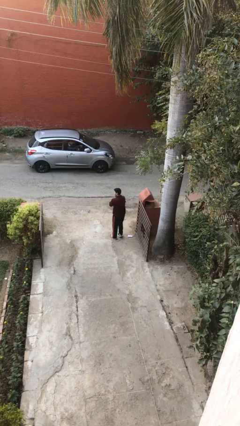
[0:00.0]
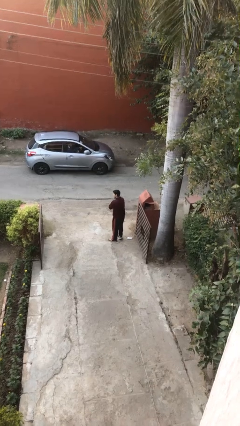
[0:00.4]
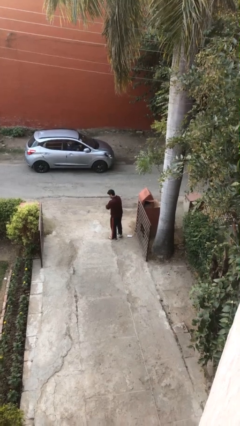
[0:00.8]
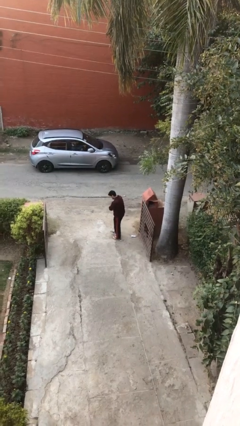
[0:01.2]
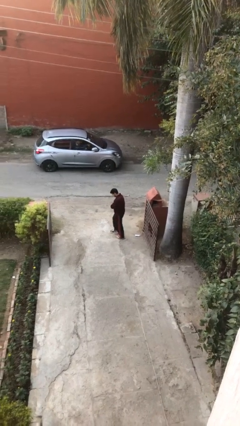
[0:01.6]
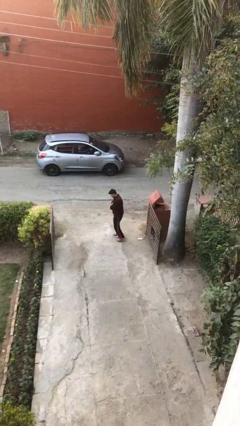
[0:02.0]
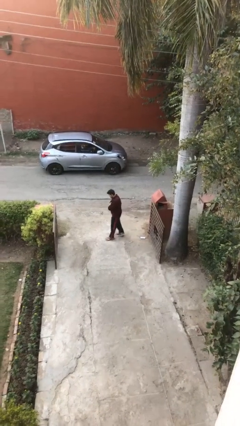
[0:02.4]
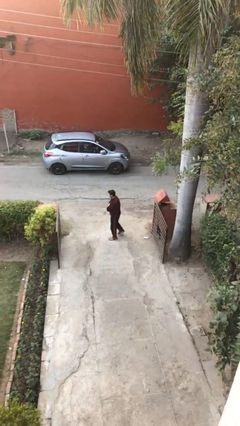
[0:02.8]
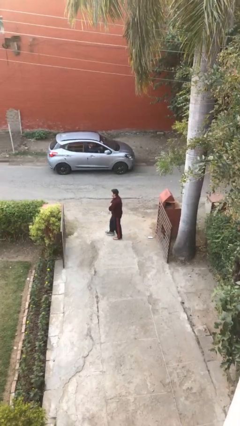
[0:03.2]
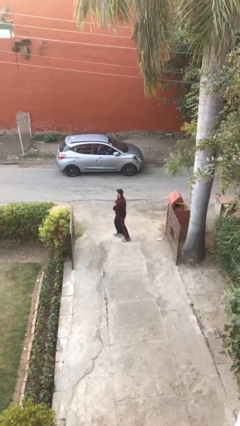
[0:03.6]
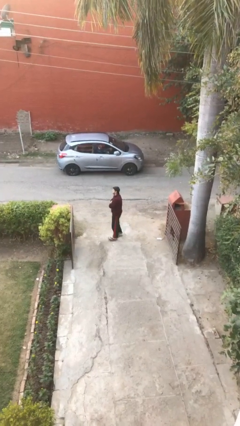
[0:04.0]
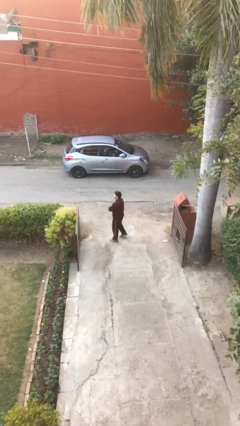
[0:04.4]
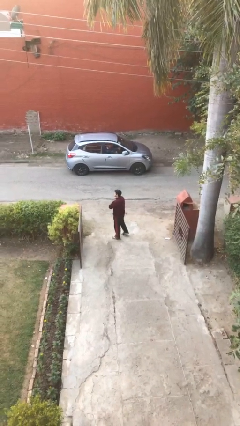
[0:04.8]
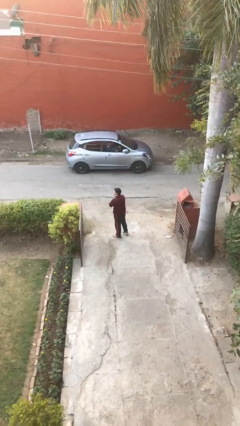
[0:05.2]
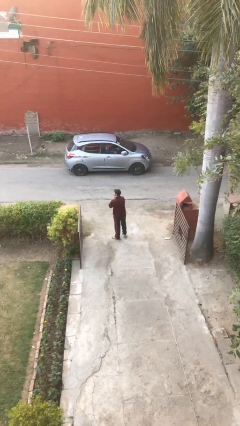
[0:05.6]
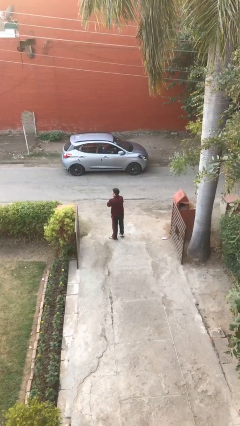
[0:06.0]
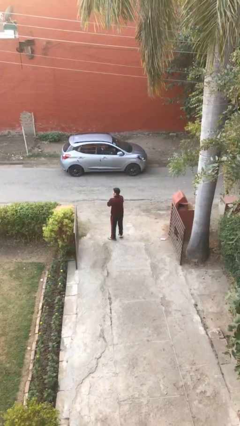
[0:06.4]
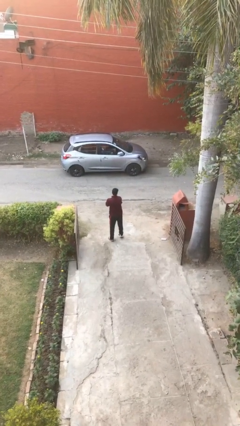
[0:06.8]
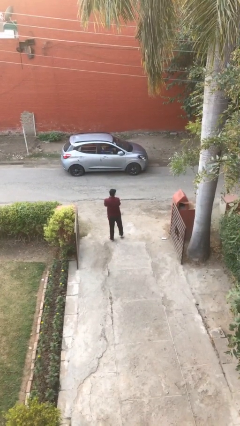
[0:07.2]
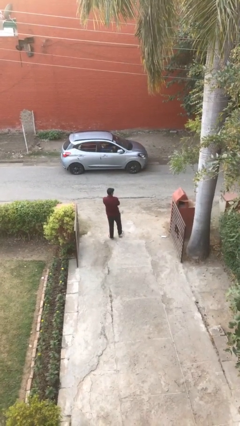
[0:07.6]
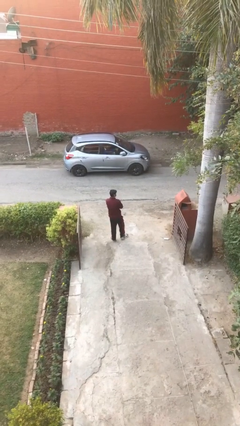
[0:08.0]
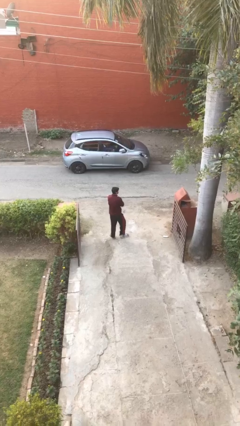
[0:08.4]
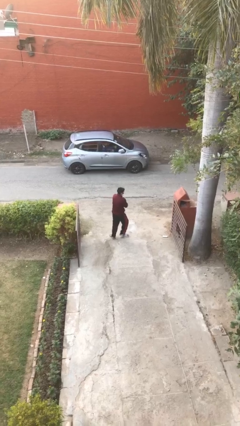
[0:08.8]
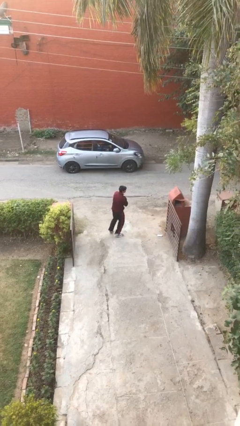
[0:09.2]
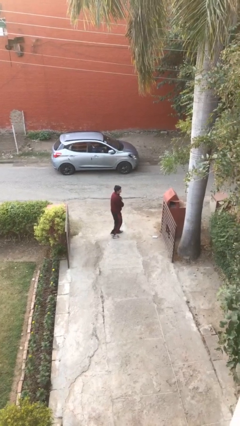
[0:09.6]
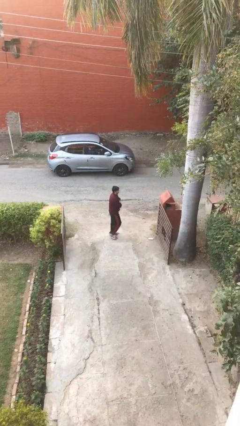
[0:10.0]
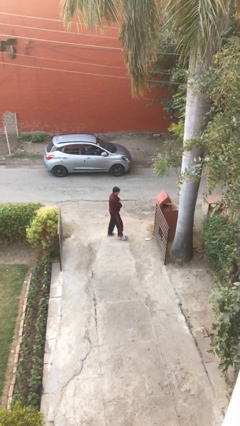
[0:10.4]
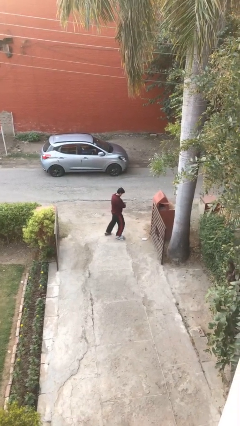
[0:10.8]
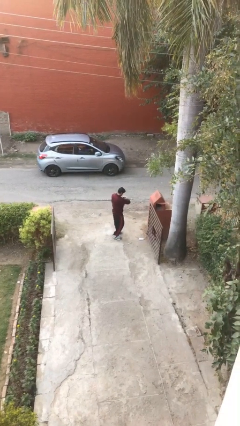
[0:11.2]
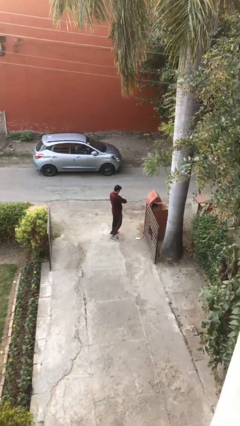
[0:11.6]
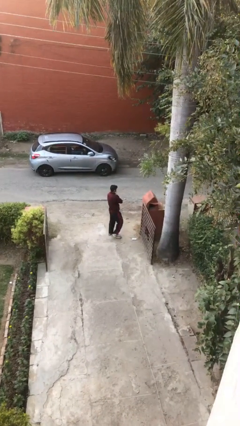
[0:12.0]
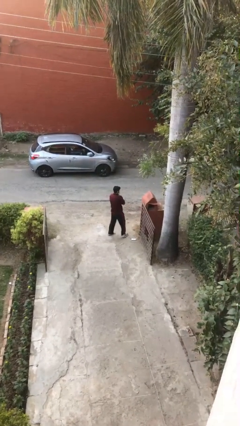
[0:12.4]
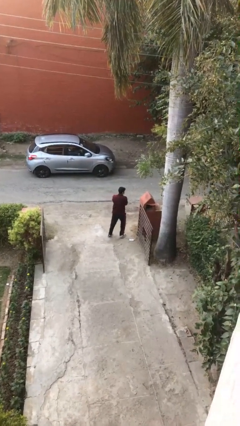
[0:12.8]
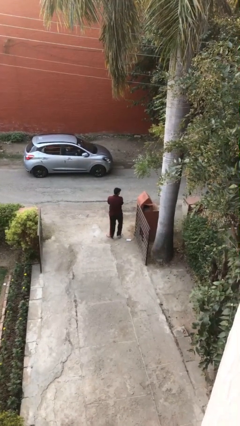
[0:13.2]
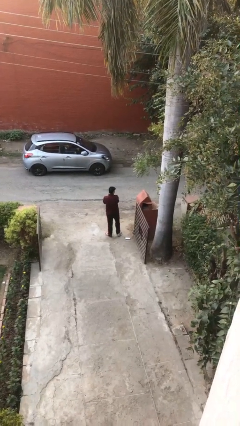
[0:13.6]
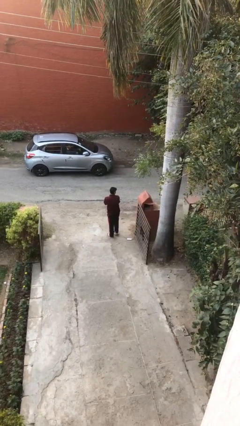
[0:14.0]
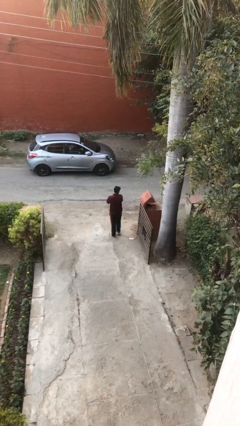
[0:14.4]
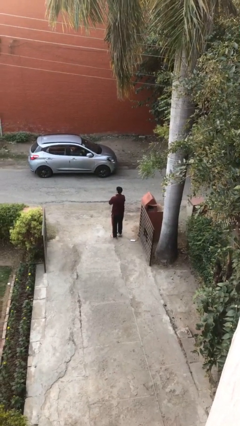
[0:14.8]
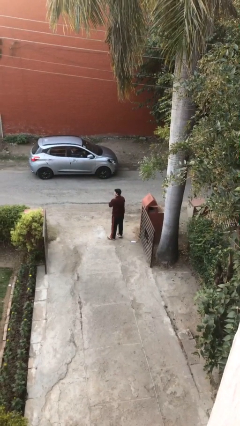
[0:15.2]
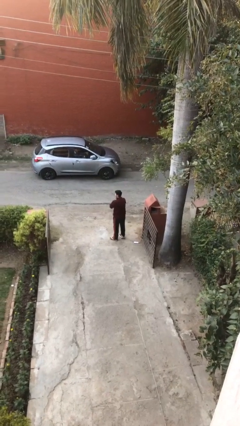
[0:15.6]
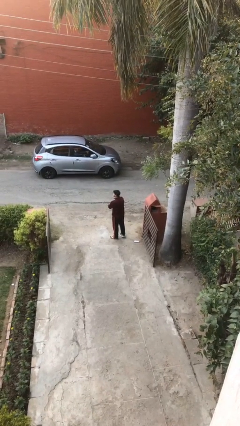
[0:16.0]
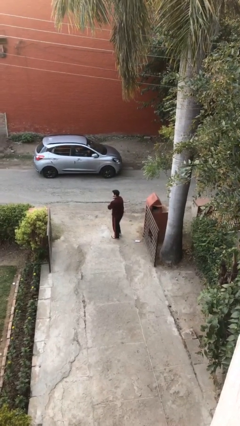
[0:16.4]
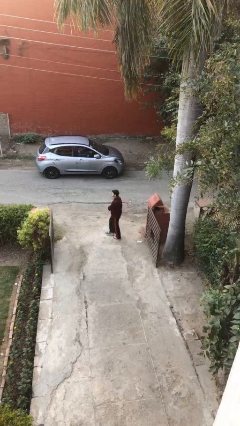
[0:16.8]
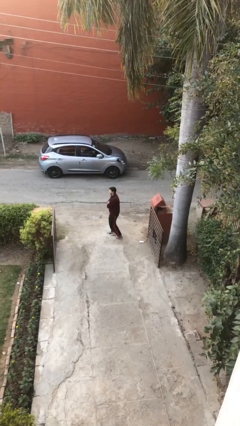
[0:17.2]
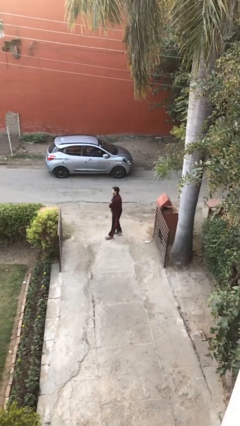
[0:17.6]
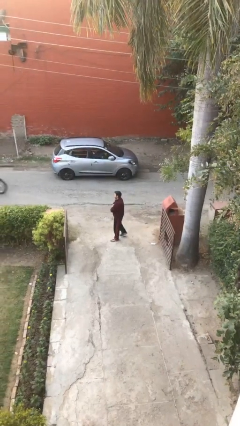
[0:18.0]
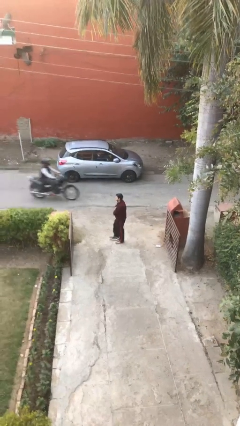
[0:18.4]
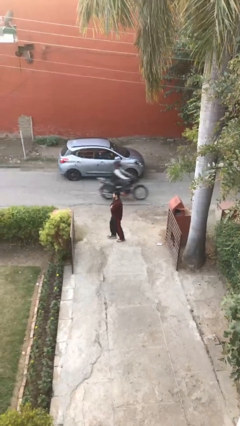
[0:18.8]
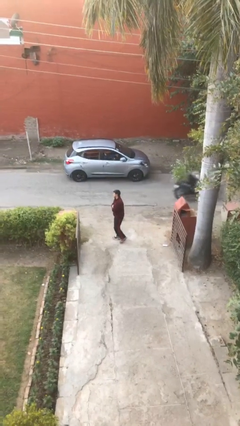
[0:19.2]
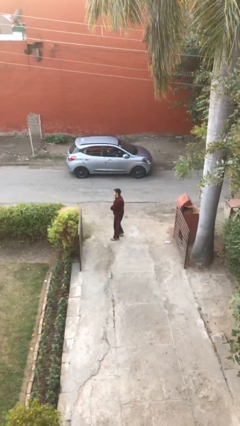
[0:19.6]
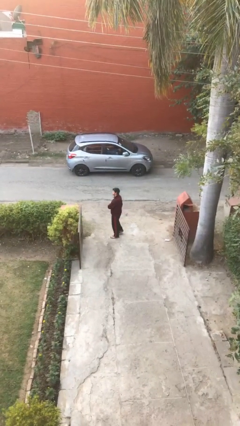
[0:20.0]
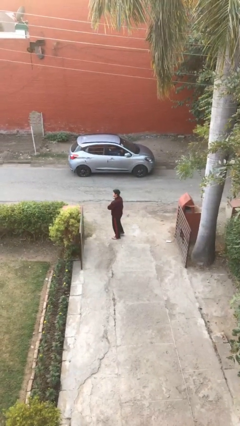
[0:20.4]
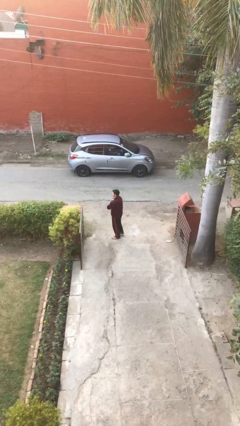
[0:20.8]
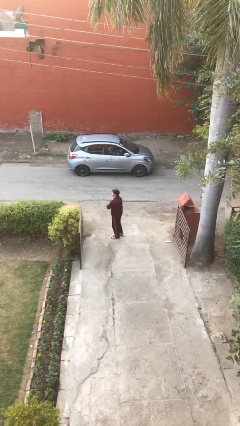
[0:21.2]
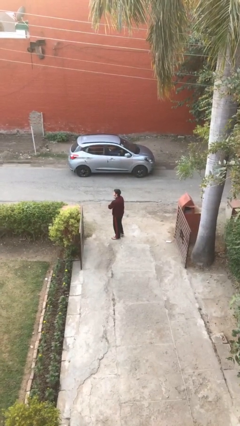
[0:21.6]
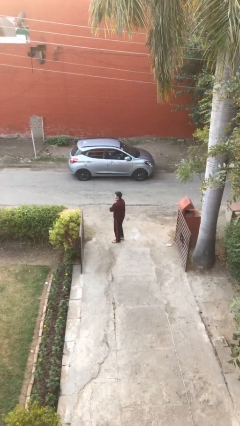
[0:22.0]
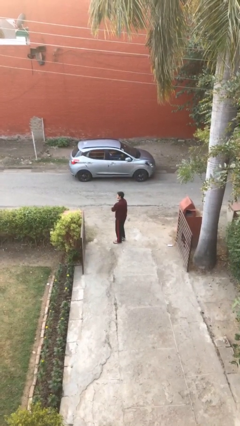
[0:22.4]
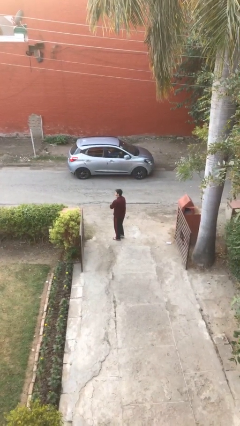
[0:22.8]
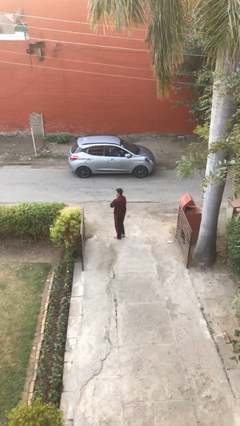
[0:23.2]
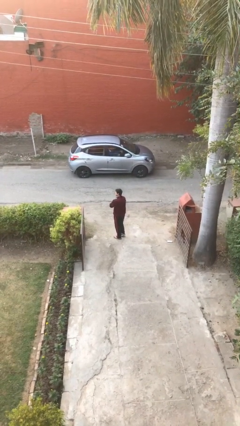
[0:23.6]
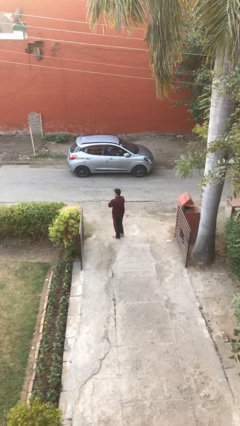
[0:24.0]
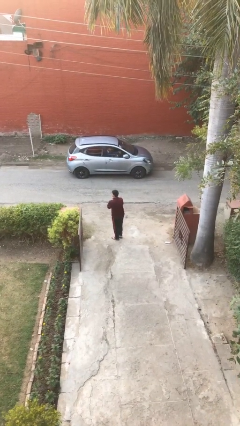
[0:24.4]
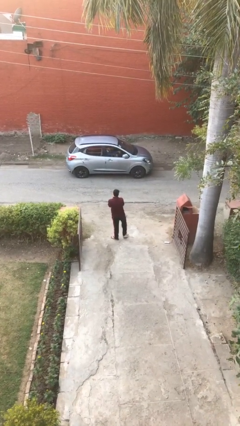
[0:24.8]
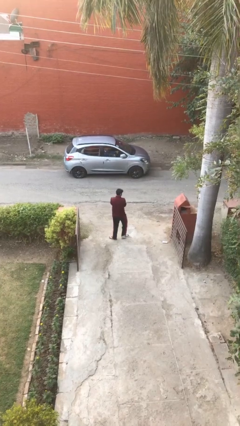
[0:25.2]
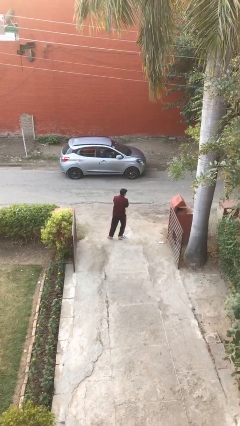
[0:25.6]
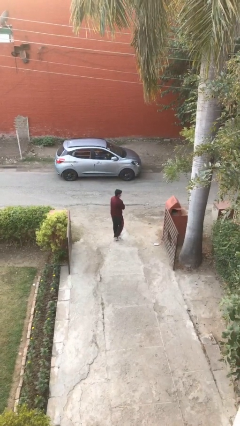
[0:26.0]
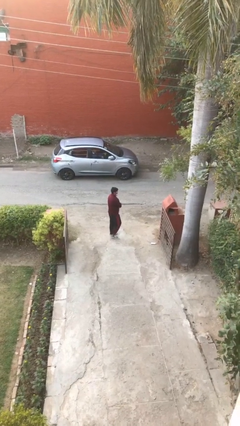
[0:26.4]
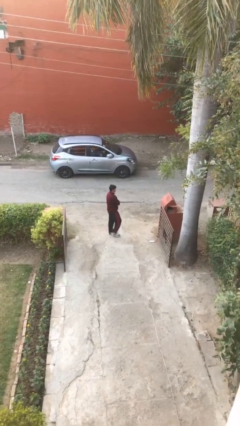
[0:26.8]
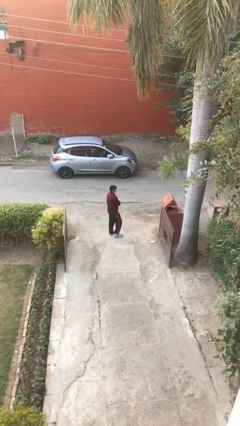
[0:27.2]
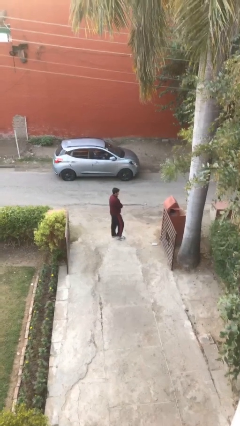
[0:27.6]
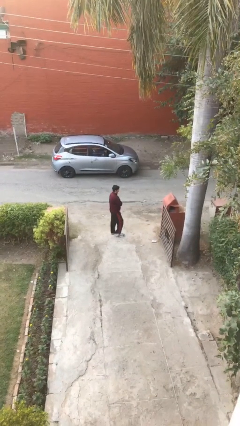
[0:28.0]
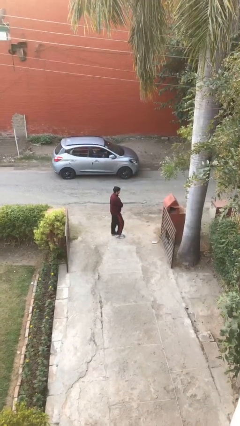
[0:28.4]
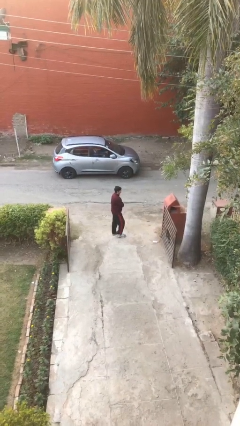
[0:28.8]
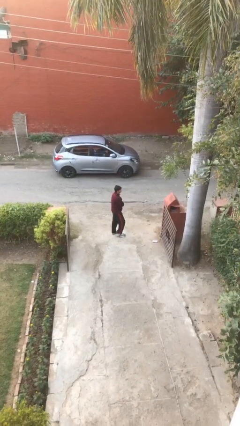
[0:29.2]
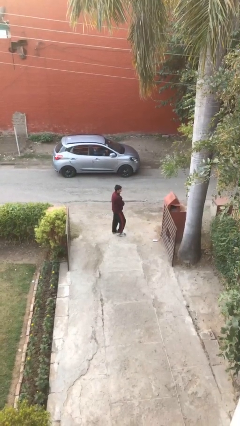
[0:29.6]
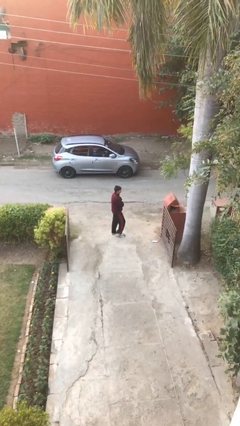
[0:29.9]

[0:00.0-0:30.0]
person walks

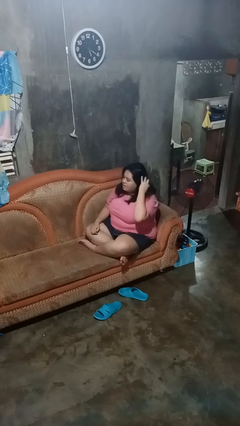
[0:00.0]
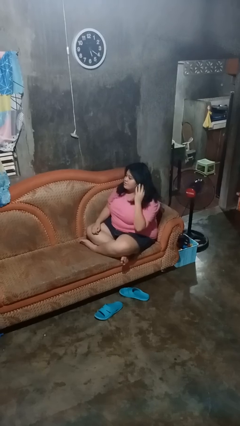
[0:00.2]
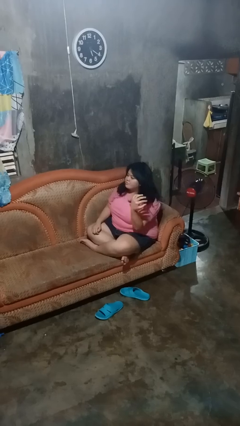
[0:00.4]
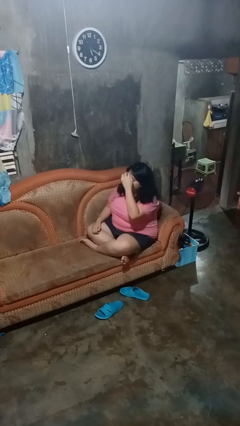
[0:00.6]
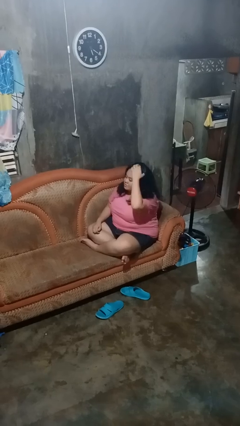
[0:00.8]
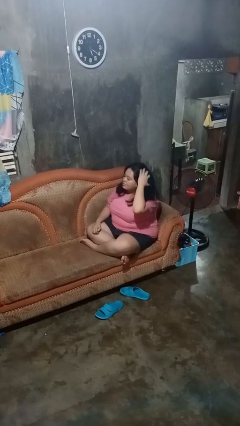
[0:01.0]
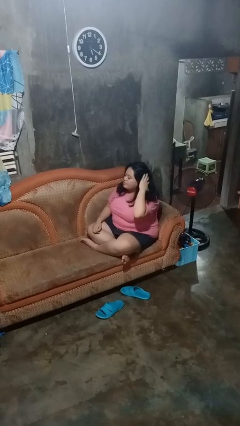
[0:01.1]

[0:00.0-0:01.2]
person strokes hair

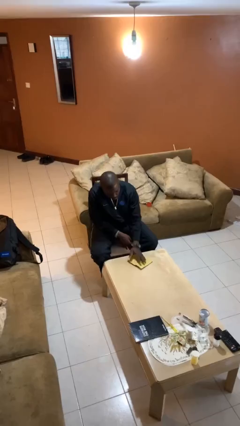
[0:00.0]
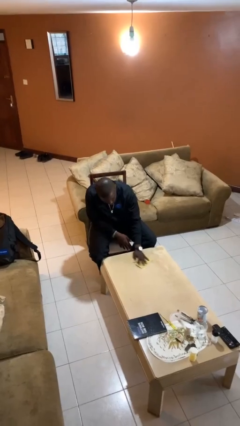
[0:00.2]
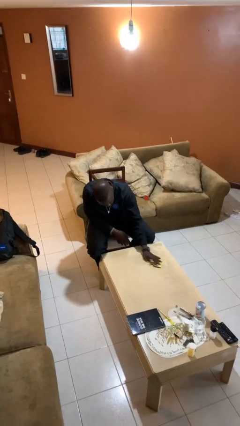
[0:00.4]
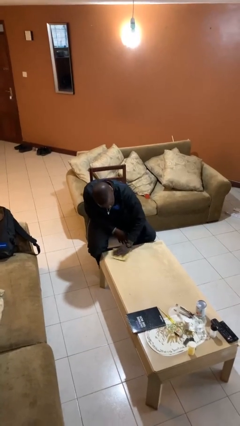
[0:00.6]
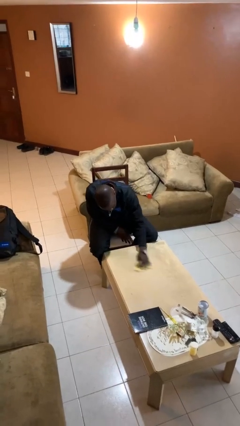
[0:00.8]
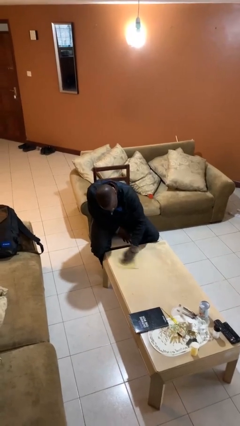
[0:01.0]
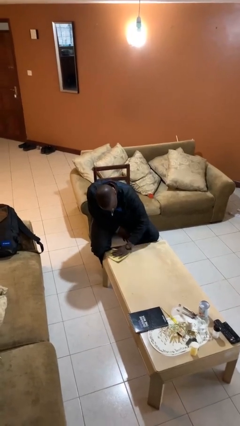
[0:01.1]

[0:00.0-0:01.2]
person cleans table with rag

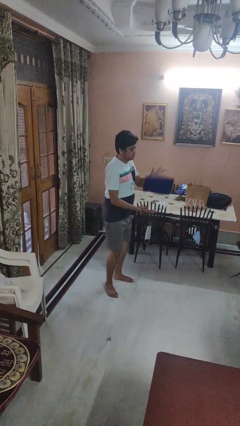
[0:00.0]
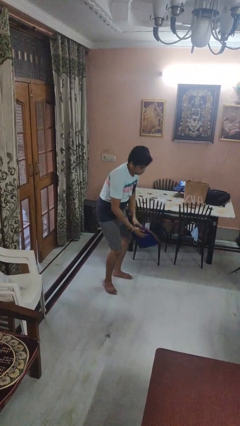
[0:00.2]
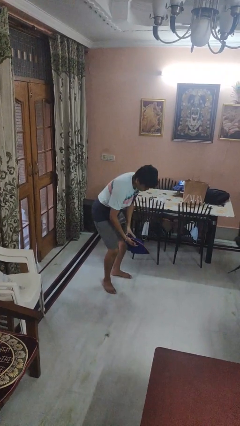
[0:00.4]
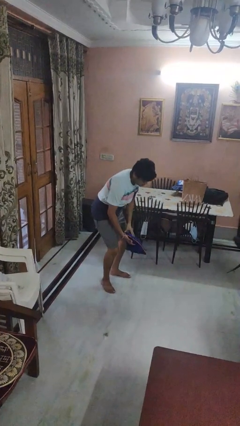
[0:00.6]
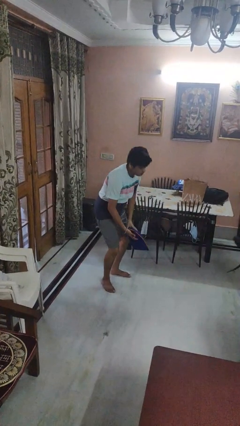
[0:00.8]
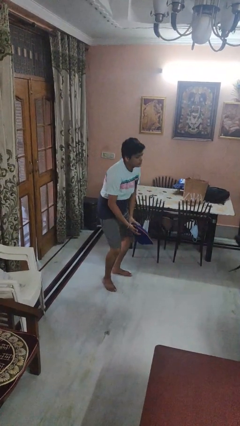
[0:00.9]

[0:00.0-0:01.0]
person catches dropped object
